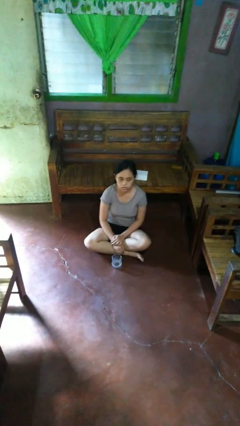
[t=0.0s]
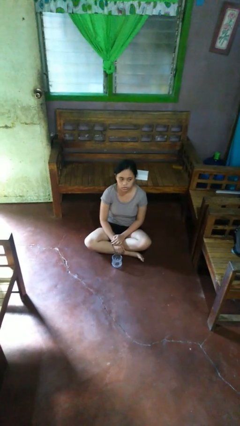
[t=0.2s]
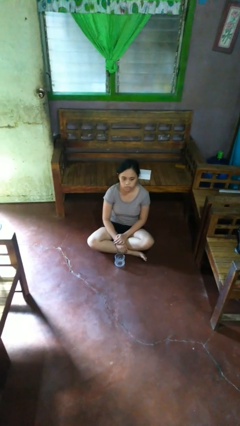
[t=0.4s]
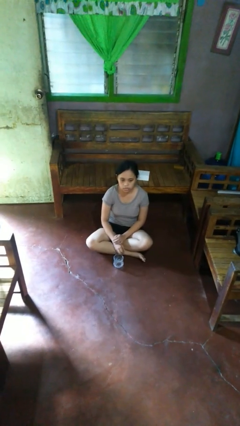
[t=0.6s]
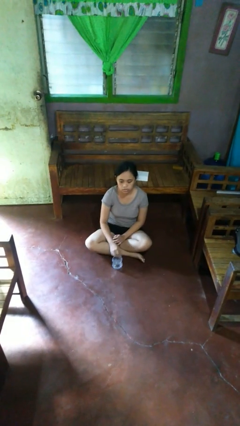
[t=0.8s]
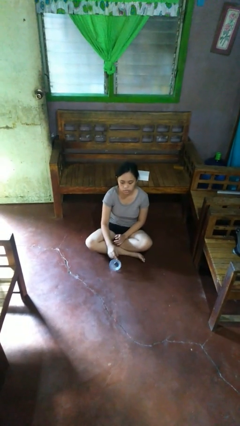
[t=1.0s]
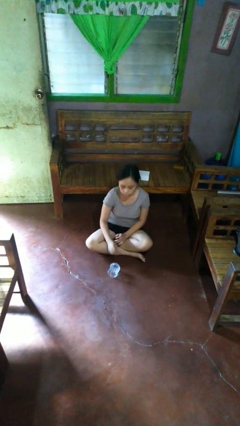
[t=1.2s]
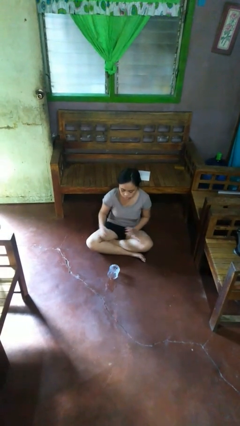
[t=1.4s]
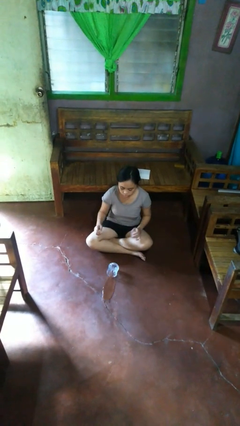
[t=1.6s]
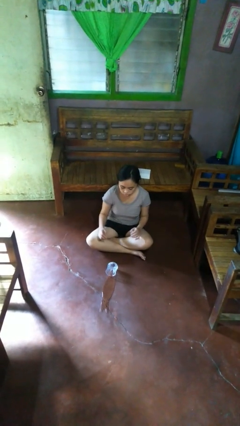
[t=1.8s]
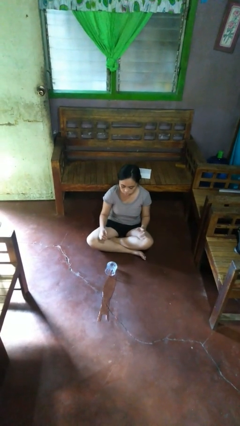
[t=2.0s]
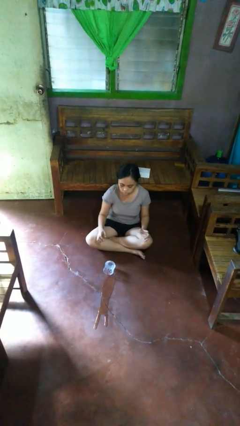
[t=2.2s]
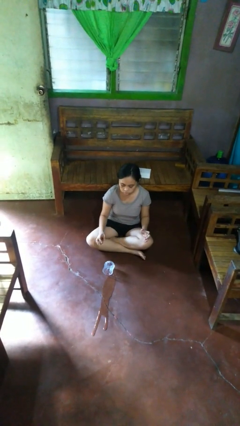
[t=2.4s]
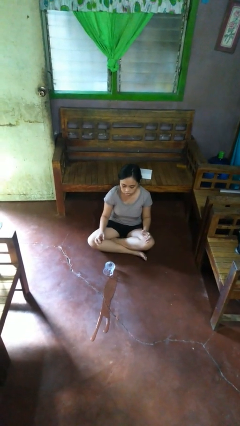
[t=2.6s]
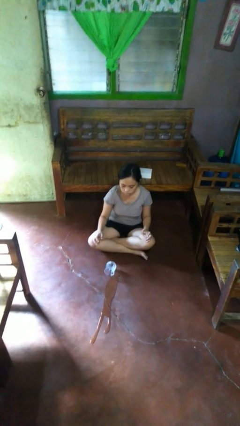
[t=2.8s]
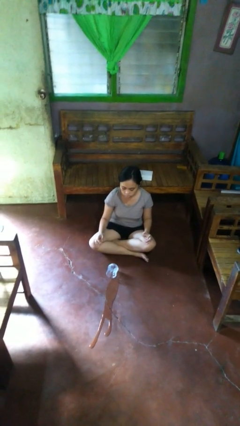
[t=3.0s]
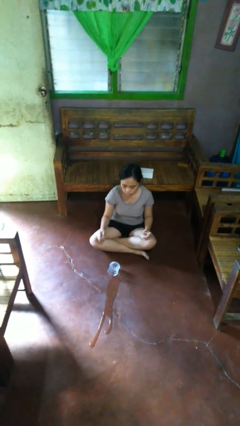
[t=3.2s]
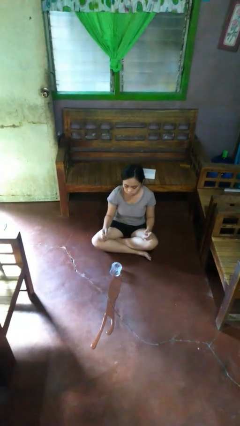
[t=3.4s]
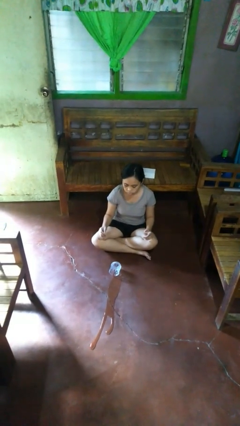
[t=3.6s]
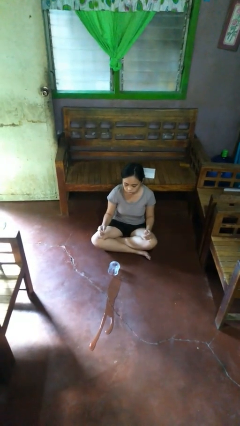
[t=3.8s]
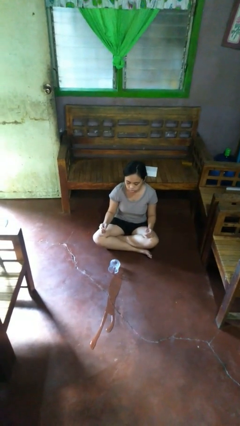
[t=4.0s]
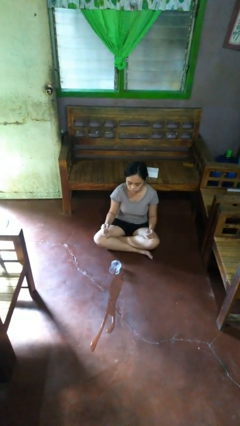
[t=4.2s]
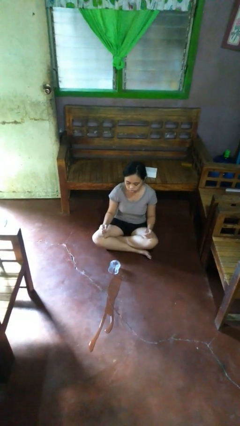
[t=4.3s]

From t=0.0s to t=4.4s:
person spills on floor

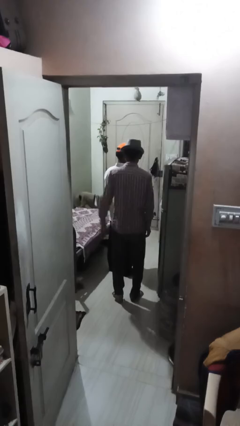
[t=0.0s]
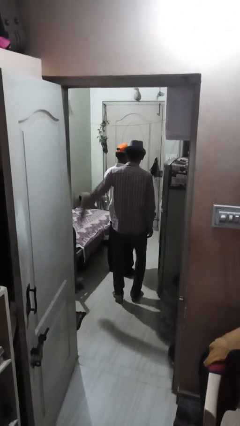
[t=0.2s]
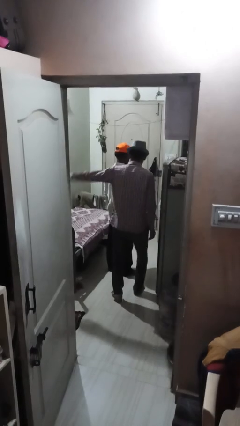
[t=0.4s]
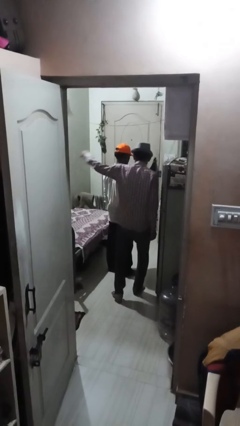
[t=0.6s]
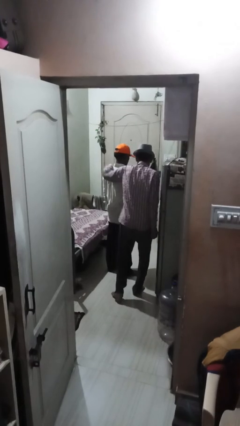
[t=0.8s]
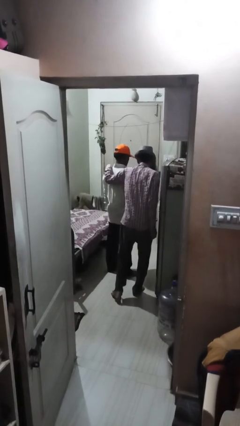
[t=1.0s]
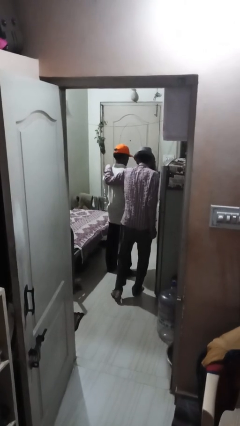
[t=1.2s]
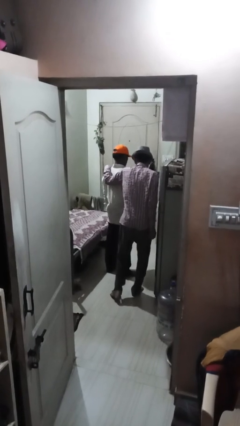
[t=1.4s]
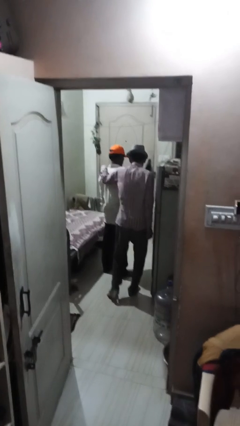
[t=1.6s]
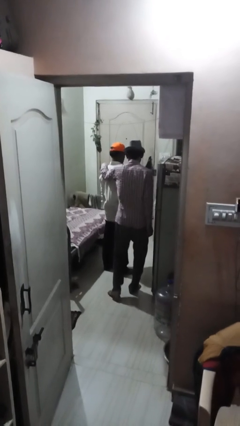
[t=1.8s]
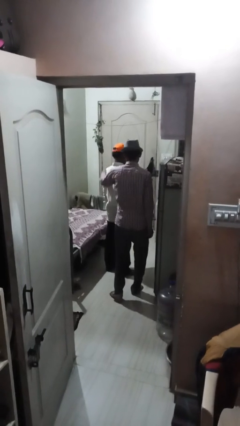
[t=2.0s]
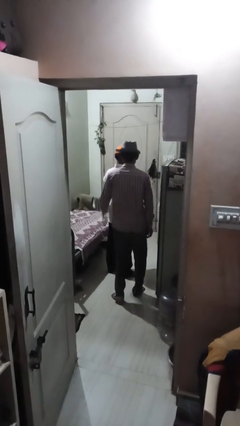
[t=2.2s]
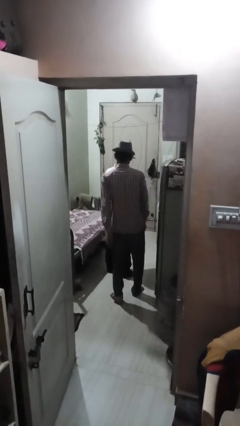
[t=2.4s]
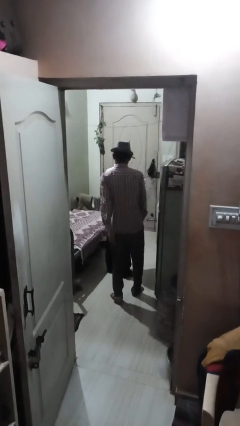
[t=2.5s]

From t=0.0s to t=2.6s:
person touches back of person

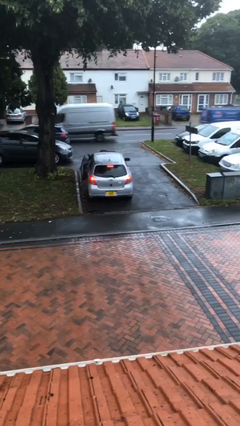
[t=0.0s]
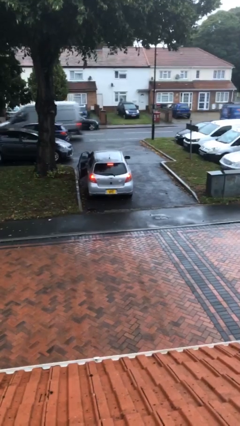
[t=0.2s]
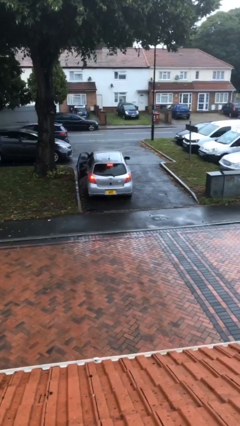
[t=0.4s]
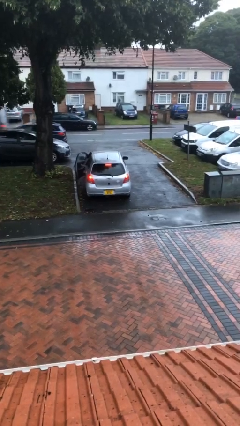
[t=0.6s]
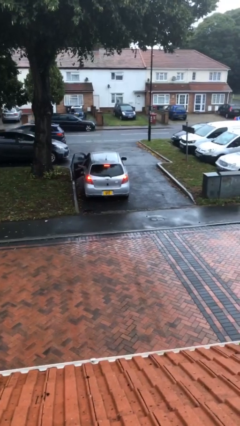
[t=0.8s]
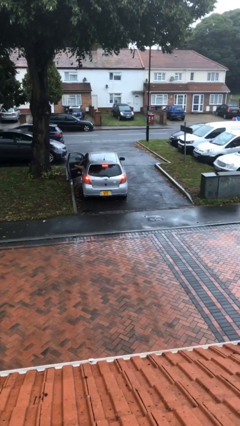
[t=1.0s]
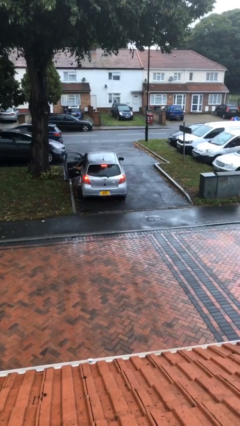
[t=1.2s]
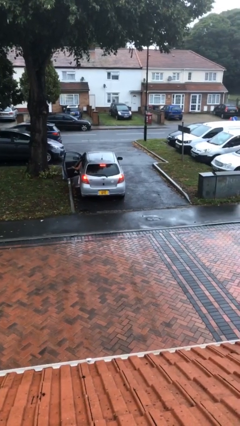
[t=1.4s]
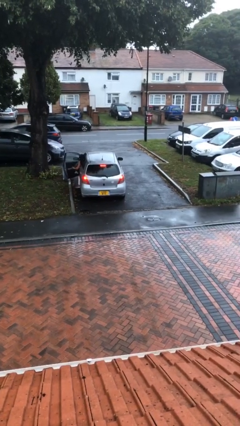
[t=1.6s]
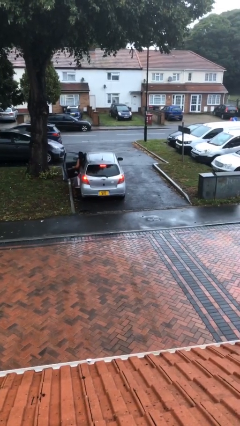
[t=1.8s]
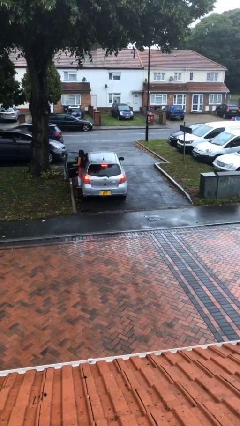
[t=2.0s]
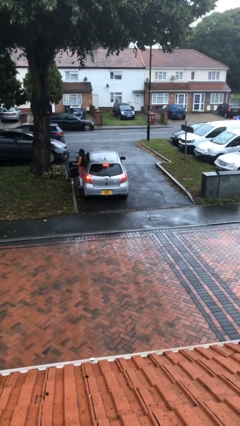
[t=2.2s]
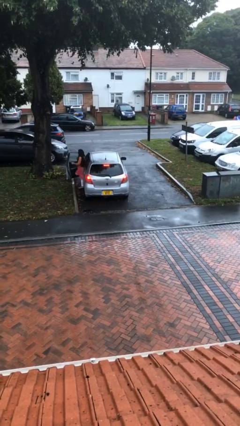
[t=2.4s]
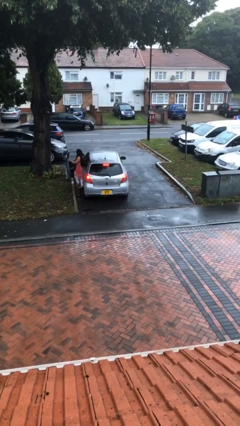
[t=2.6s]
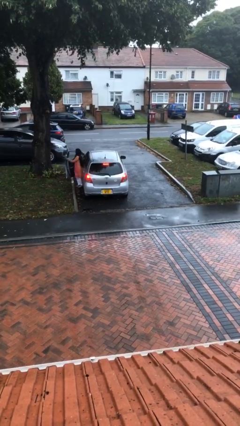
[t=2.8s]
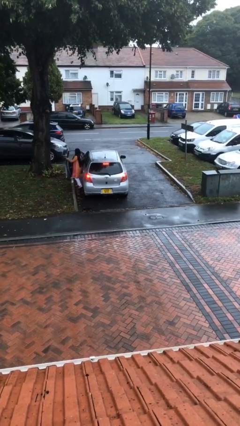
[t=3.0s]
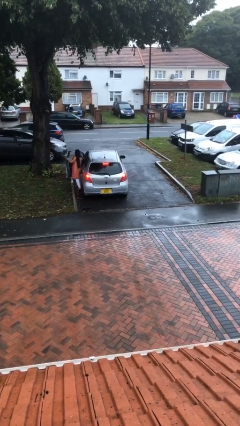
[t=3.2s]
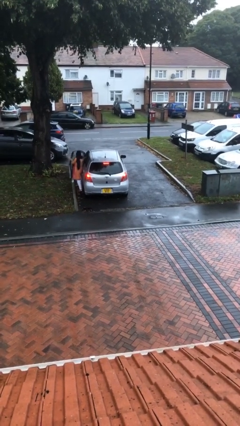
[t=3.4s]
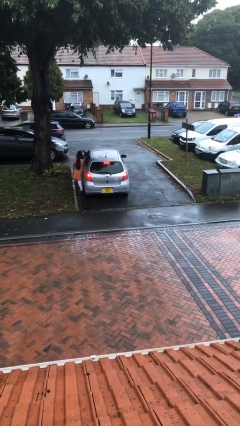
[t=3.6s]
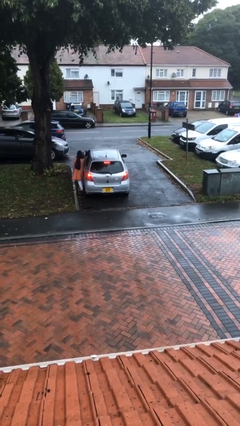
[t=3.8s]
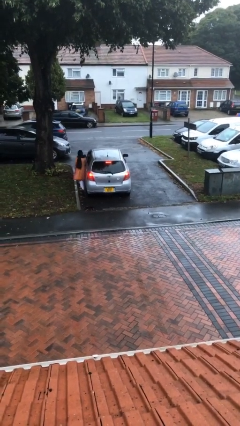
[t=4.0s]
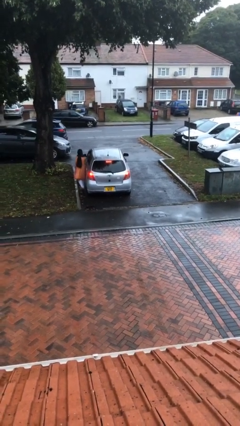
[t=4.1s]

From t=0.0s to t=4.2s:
car drops off person

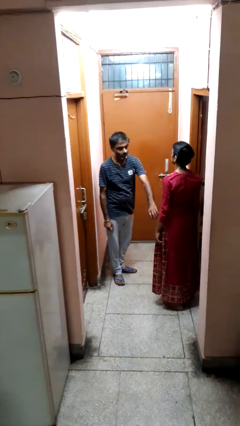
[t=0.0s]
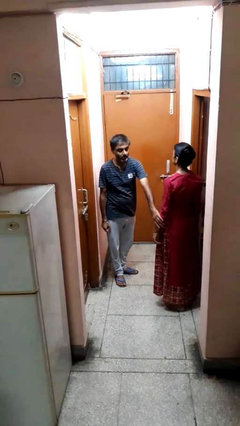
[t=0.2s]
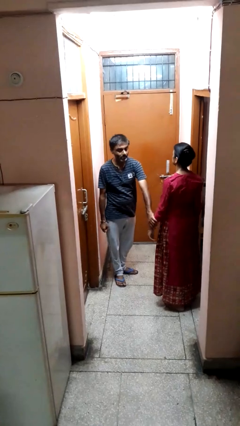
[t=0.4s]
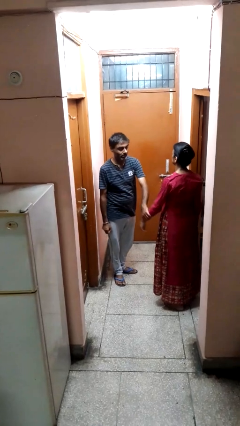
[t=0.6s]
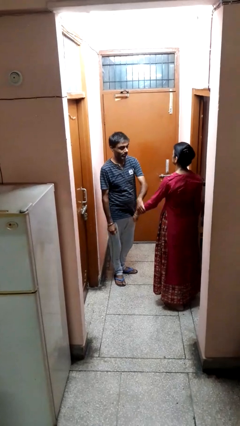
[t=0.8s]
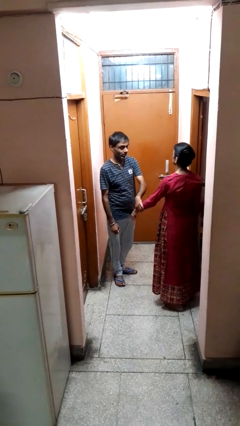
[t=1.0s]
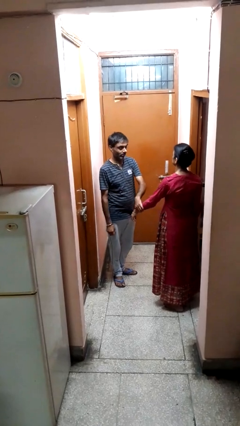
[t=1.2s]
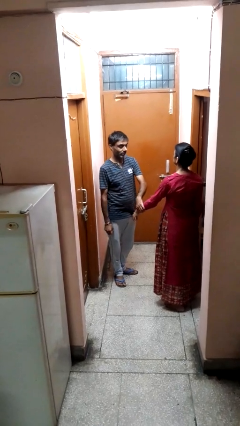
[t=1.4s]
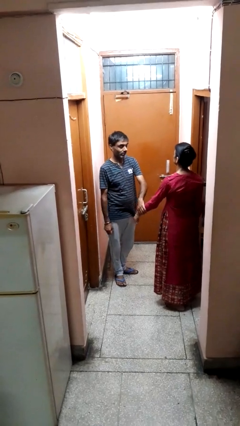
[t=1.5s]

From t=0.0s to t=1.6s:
person grabs person by forearm

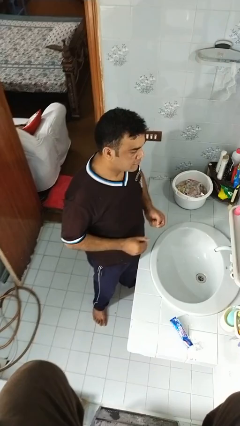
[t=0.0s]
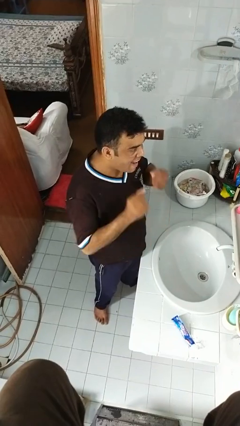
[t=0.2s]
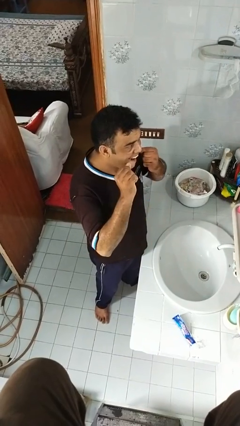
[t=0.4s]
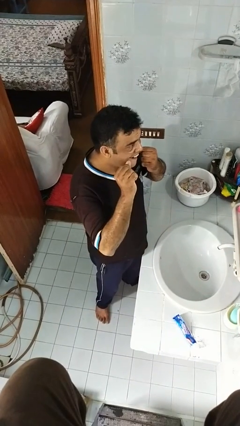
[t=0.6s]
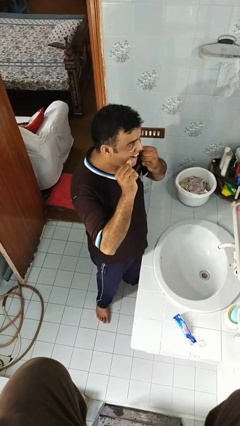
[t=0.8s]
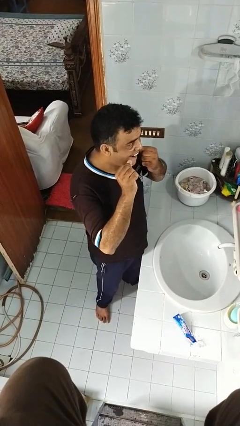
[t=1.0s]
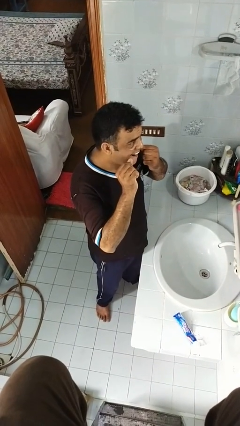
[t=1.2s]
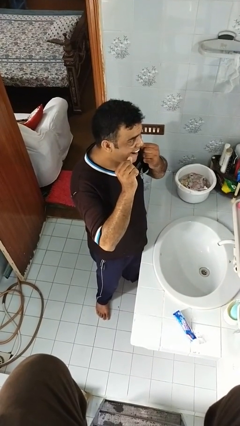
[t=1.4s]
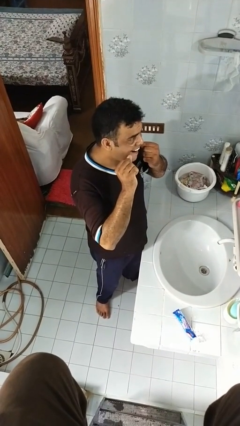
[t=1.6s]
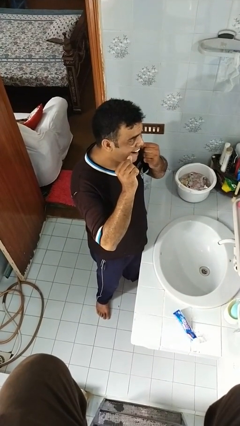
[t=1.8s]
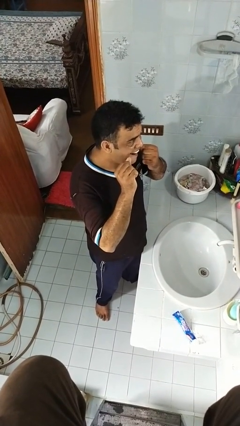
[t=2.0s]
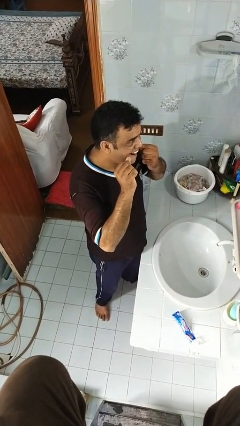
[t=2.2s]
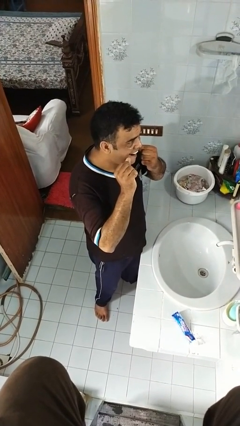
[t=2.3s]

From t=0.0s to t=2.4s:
person flosses

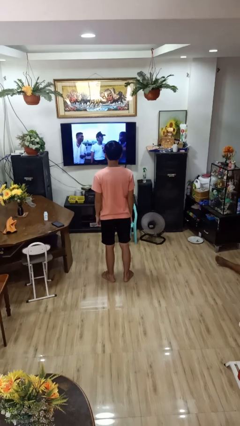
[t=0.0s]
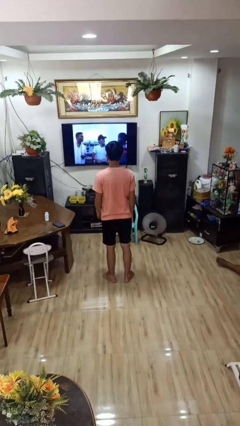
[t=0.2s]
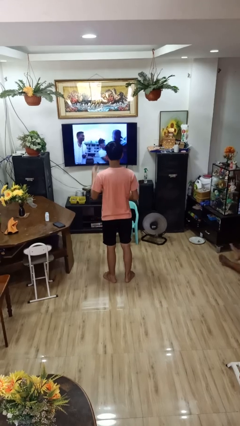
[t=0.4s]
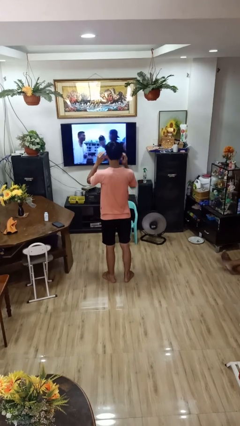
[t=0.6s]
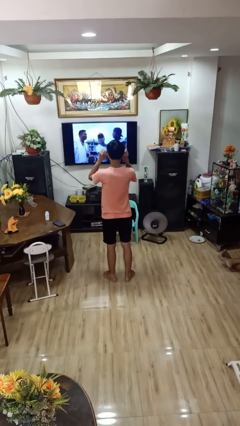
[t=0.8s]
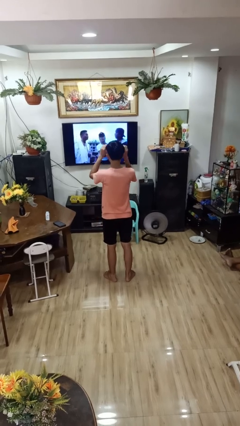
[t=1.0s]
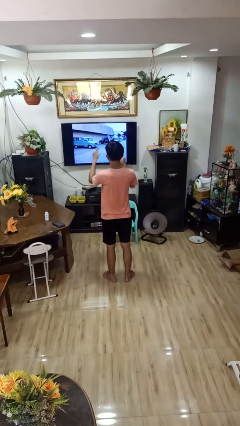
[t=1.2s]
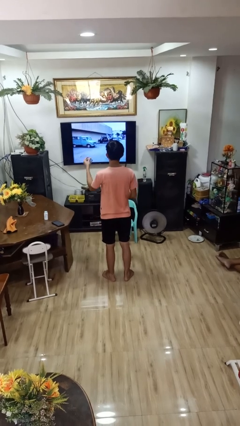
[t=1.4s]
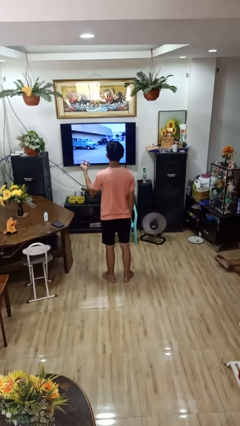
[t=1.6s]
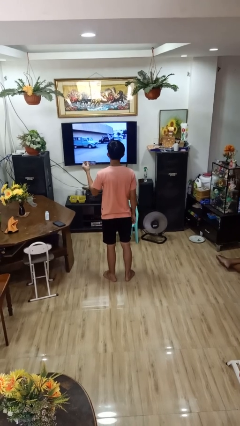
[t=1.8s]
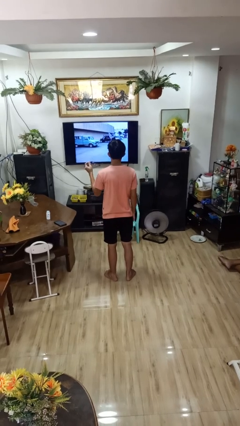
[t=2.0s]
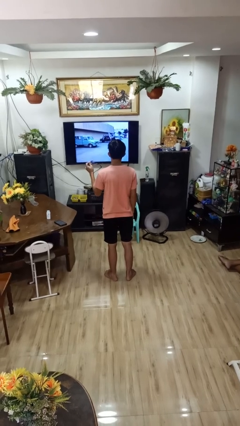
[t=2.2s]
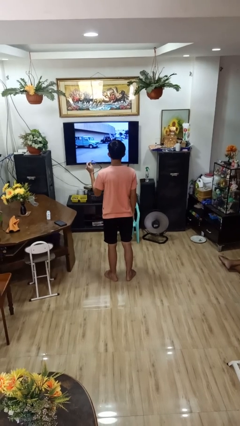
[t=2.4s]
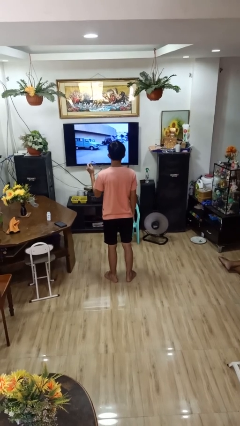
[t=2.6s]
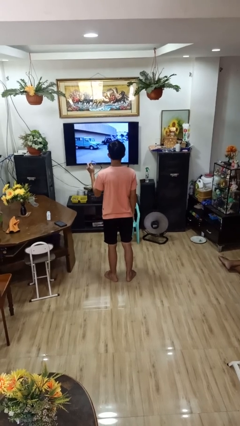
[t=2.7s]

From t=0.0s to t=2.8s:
person takes off glasses
